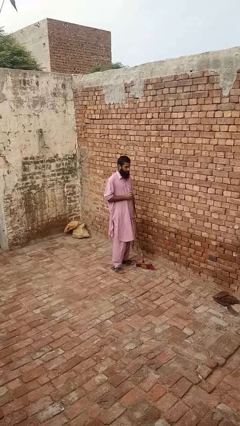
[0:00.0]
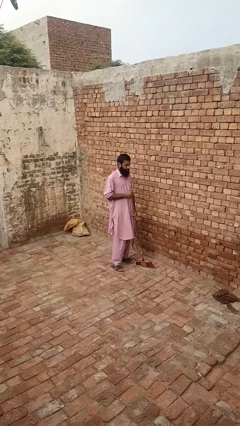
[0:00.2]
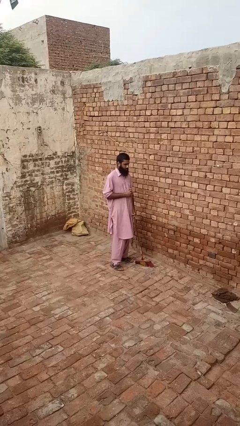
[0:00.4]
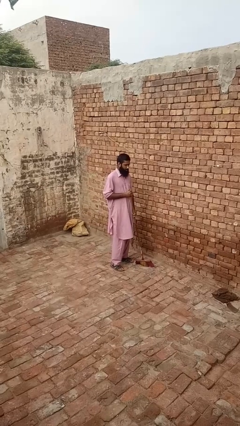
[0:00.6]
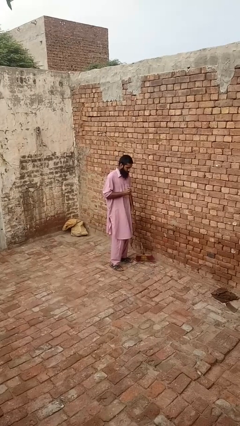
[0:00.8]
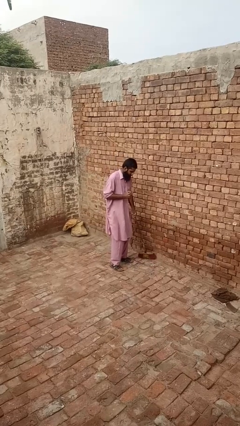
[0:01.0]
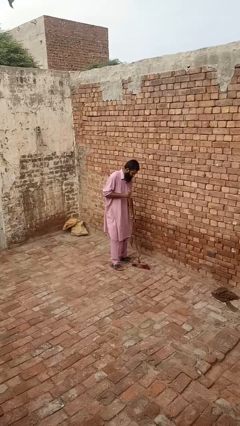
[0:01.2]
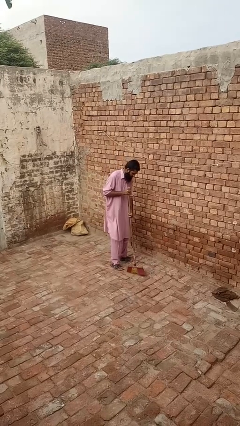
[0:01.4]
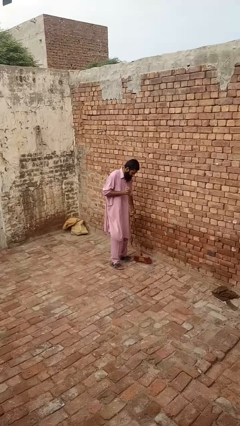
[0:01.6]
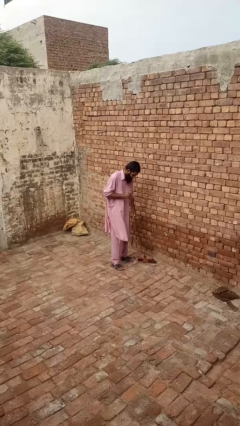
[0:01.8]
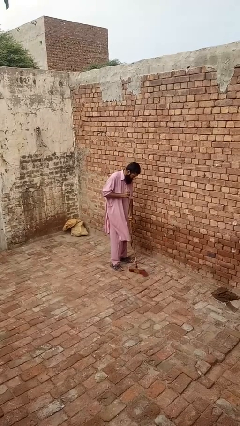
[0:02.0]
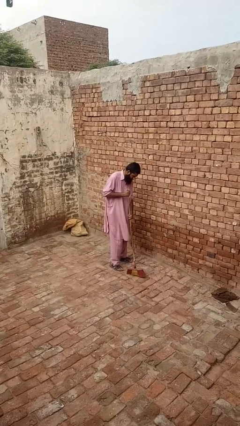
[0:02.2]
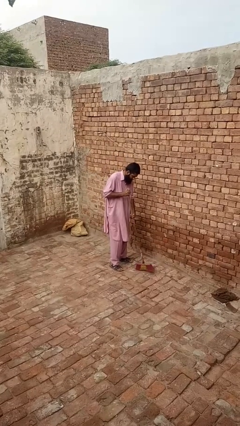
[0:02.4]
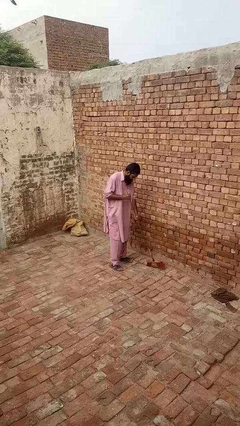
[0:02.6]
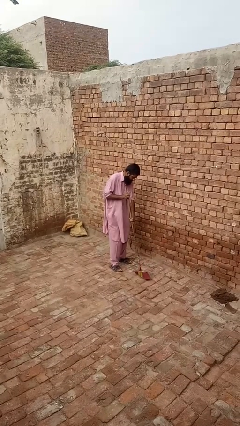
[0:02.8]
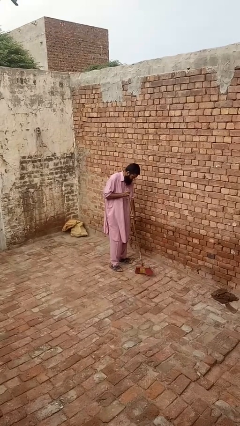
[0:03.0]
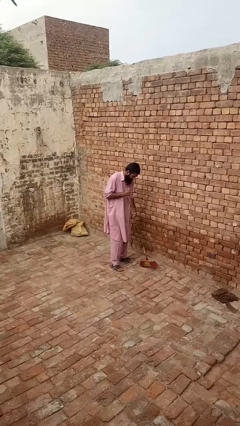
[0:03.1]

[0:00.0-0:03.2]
person sweeps floor

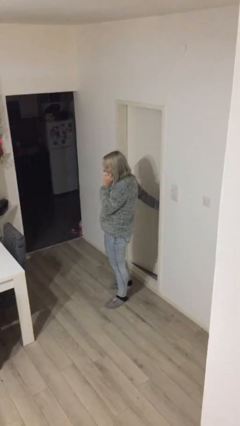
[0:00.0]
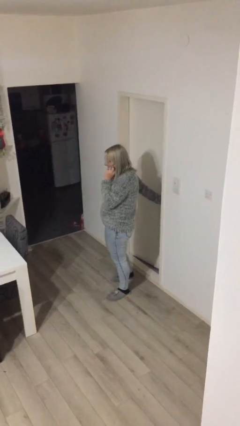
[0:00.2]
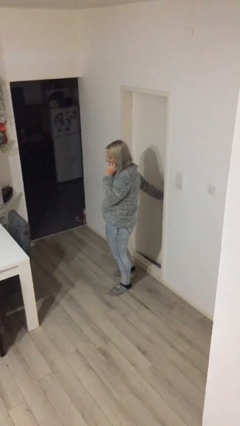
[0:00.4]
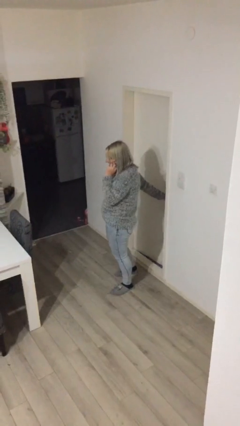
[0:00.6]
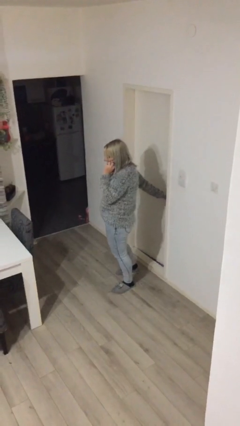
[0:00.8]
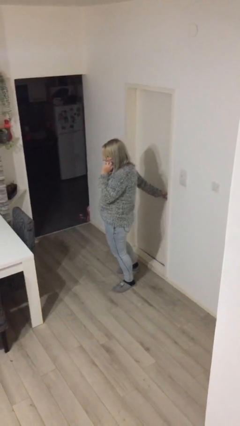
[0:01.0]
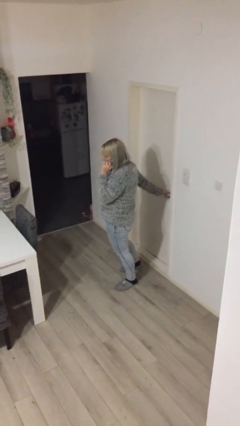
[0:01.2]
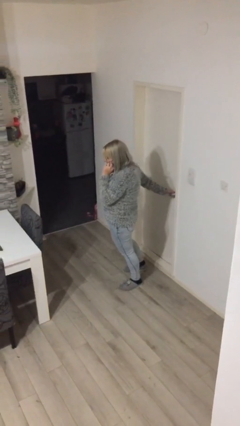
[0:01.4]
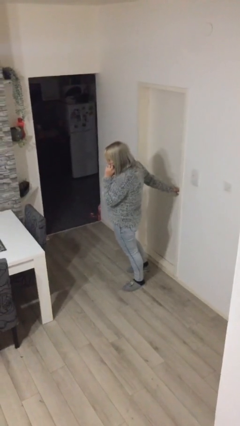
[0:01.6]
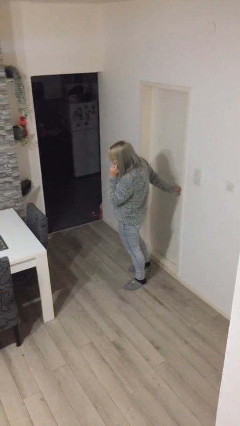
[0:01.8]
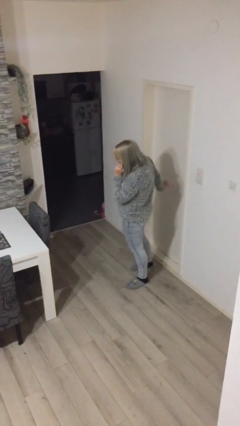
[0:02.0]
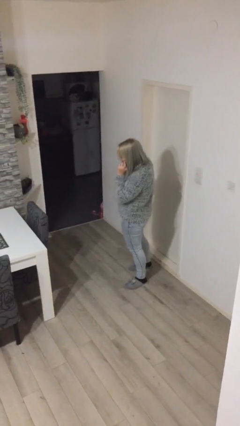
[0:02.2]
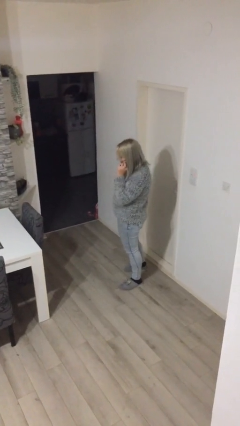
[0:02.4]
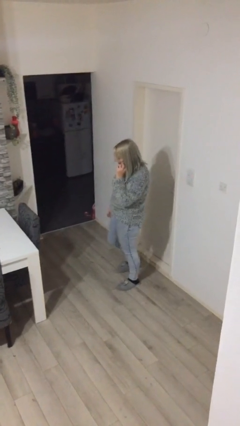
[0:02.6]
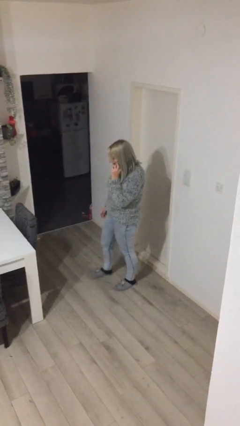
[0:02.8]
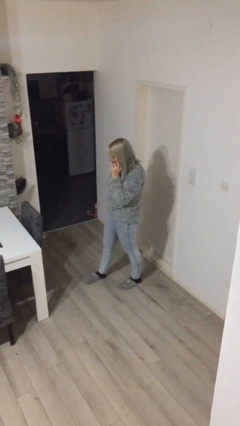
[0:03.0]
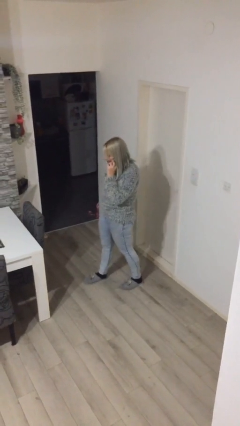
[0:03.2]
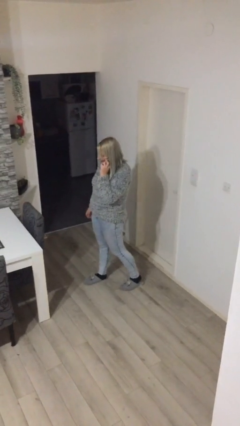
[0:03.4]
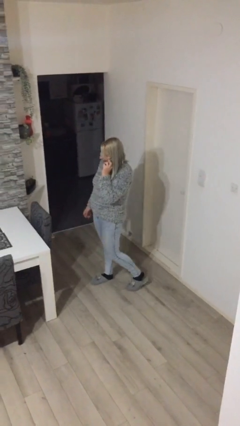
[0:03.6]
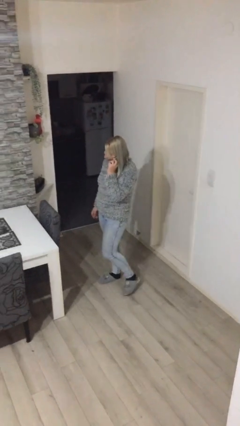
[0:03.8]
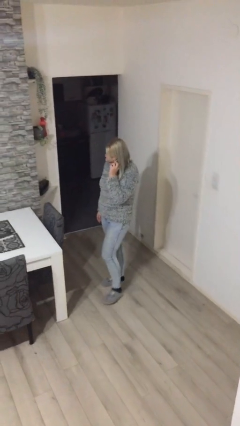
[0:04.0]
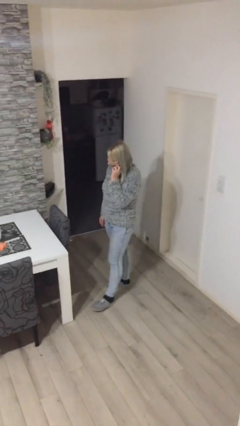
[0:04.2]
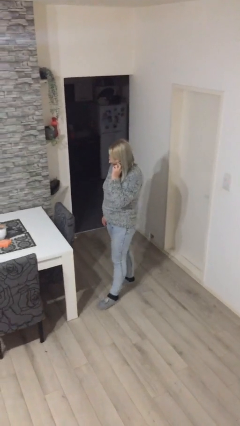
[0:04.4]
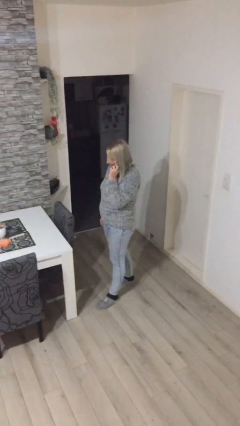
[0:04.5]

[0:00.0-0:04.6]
person closes facility door

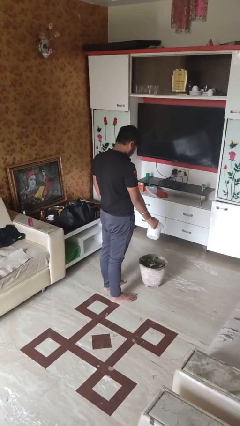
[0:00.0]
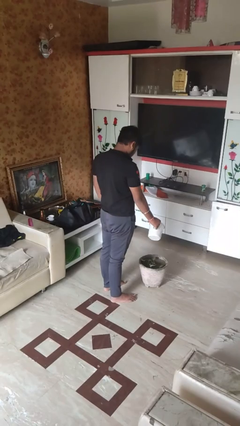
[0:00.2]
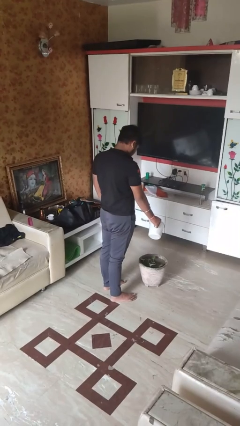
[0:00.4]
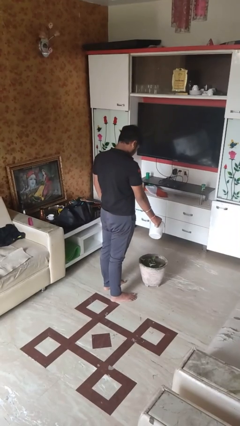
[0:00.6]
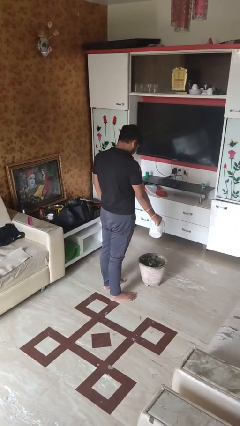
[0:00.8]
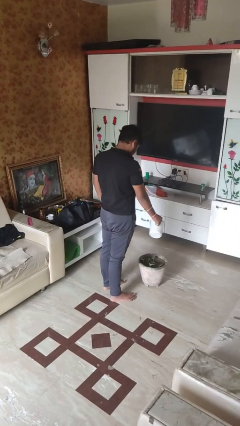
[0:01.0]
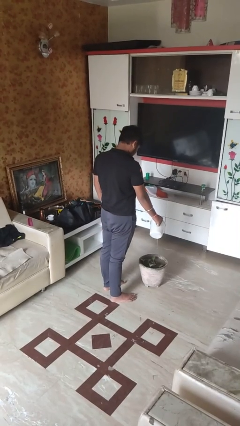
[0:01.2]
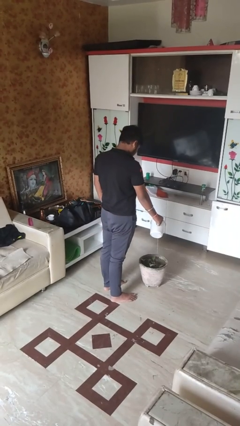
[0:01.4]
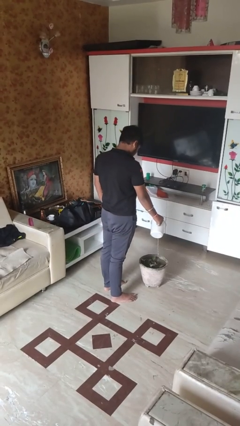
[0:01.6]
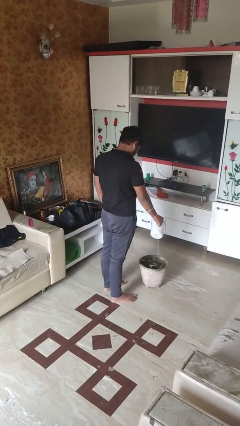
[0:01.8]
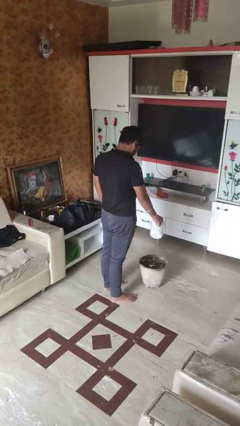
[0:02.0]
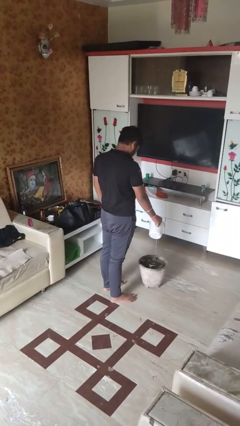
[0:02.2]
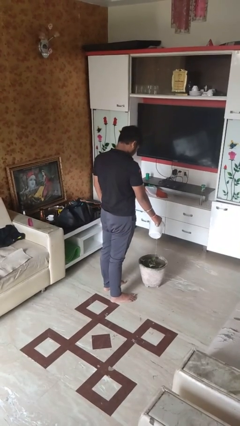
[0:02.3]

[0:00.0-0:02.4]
person waters houseplant

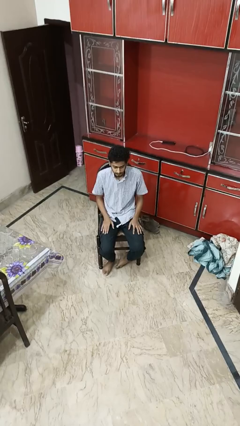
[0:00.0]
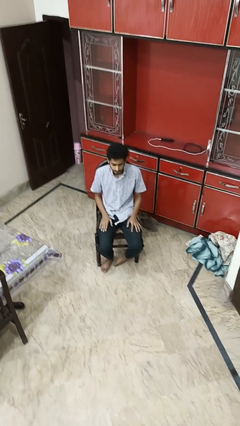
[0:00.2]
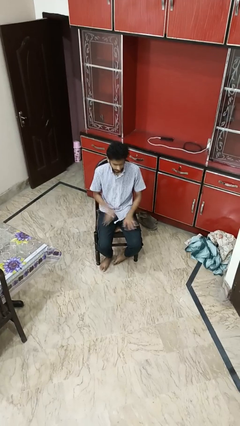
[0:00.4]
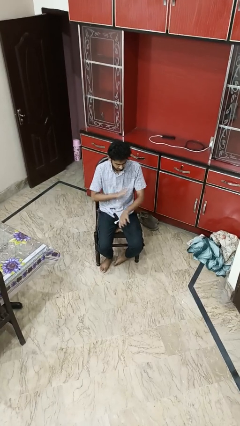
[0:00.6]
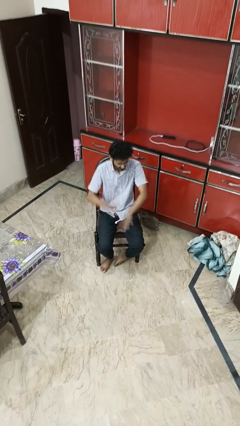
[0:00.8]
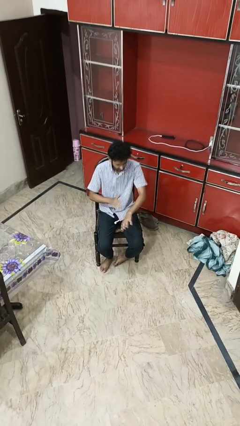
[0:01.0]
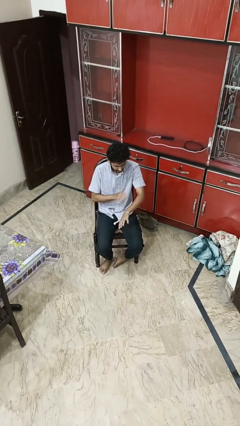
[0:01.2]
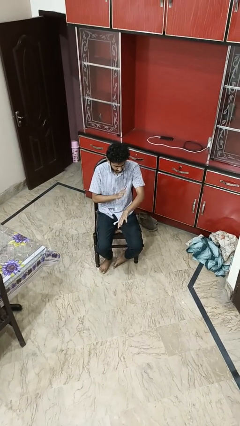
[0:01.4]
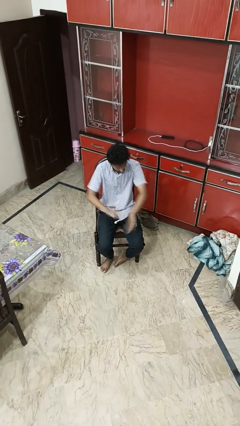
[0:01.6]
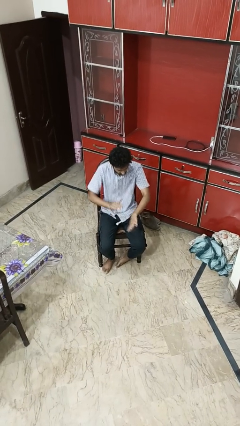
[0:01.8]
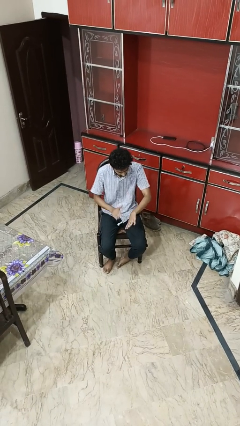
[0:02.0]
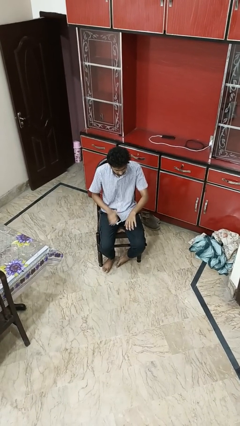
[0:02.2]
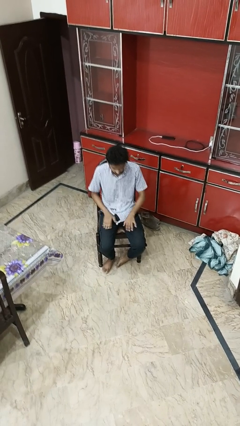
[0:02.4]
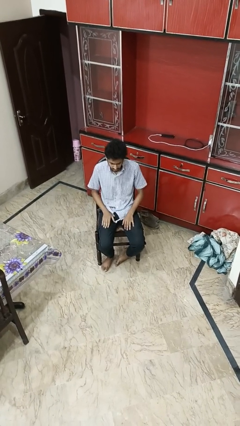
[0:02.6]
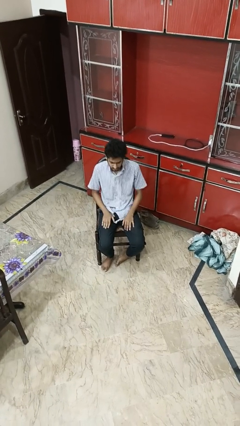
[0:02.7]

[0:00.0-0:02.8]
person swats bug

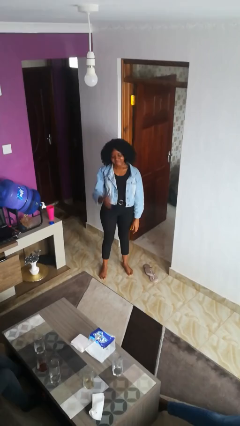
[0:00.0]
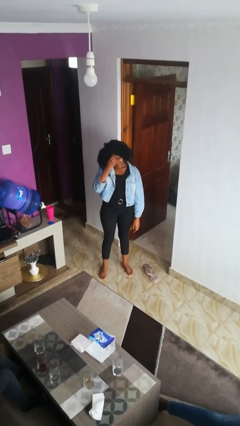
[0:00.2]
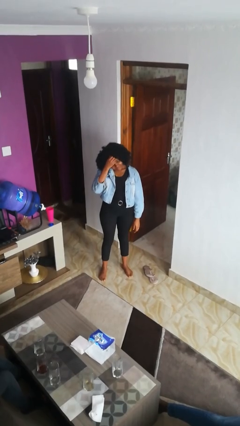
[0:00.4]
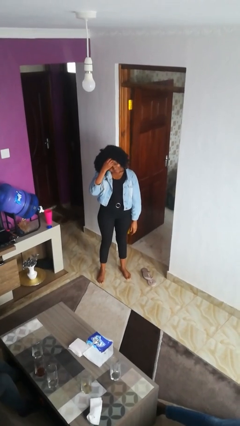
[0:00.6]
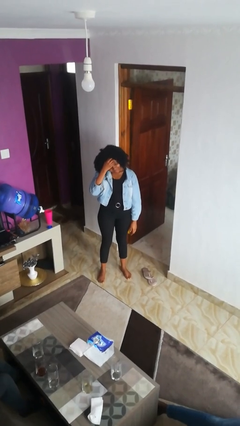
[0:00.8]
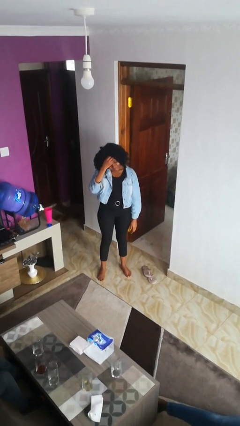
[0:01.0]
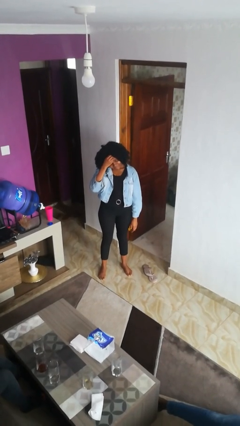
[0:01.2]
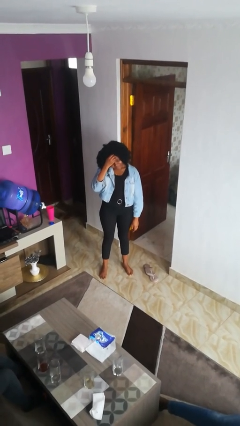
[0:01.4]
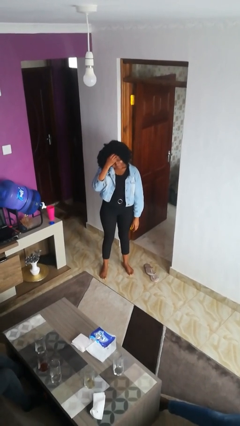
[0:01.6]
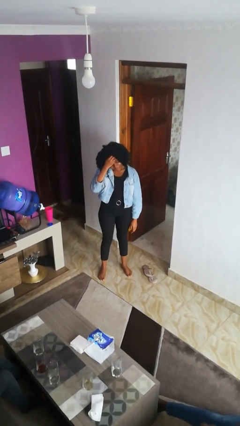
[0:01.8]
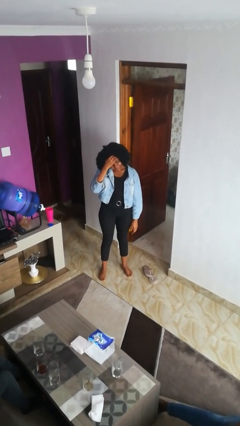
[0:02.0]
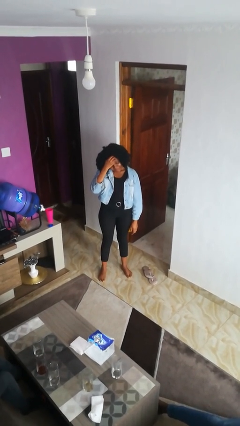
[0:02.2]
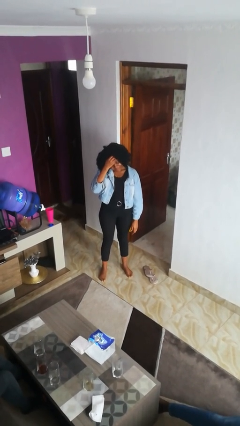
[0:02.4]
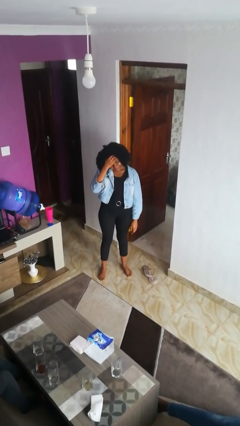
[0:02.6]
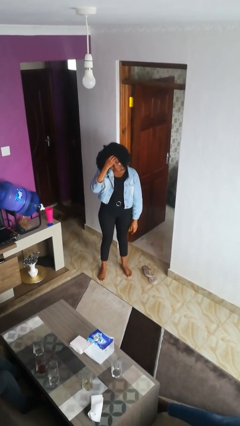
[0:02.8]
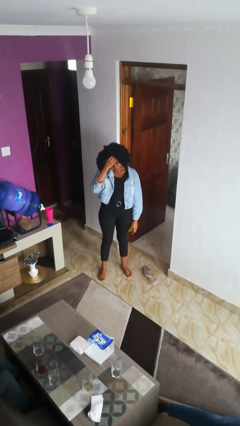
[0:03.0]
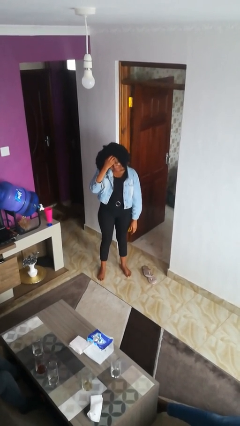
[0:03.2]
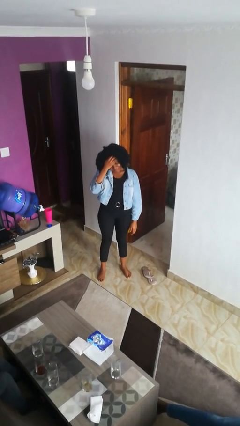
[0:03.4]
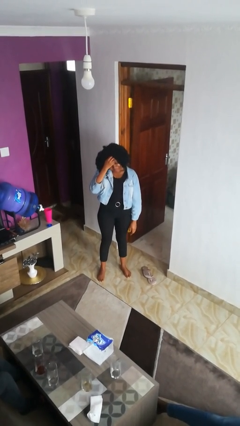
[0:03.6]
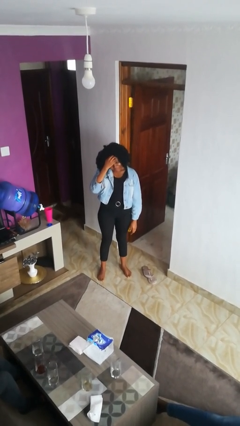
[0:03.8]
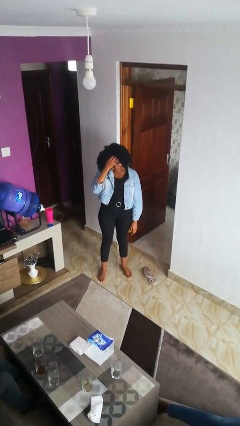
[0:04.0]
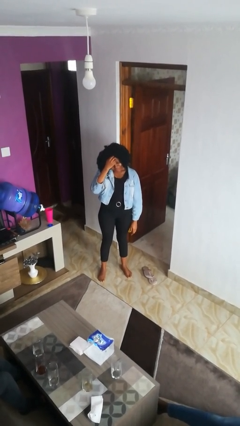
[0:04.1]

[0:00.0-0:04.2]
person scratches face

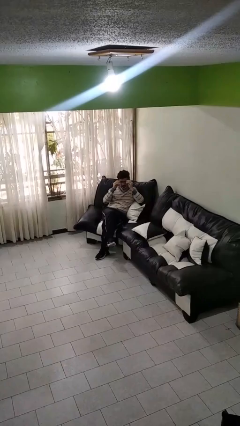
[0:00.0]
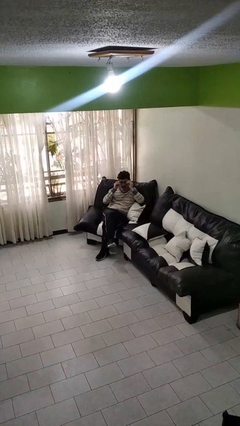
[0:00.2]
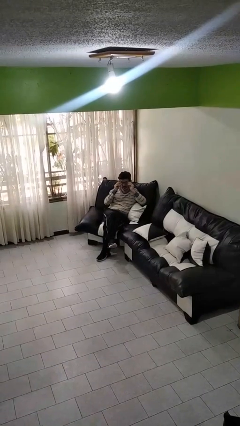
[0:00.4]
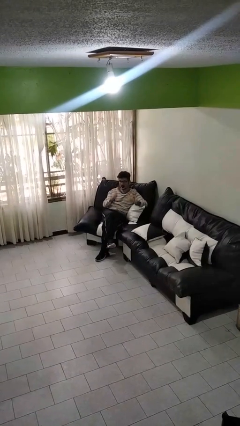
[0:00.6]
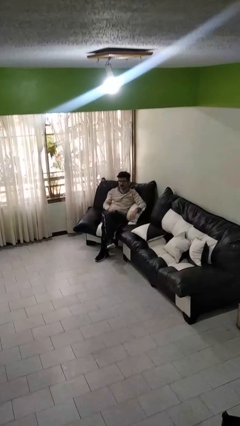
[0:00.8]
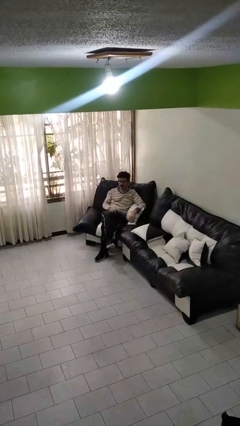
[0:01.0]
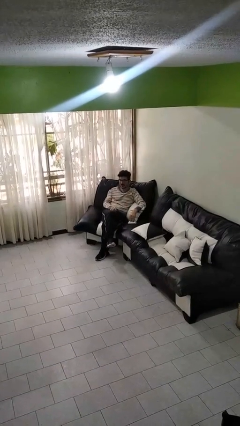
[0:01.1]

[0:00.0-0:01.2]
person puts on glasses
